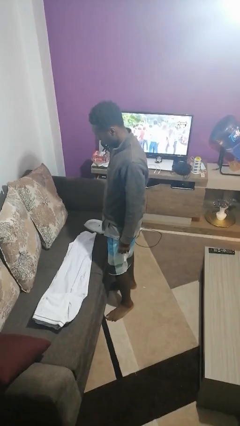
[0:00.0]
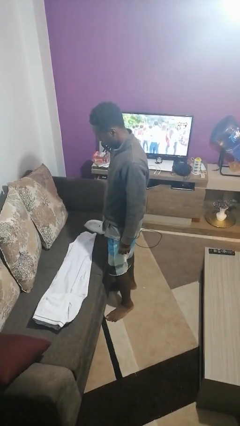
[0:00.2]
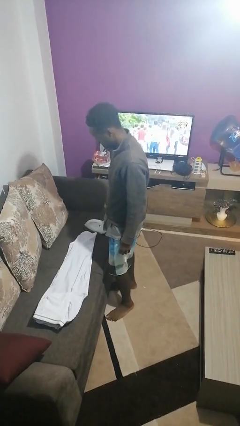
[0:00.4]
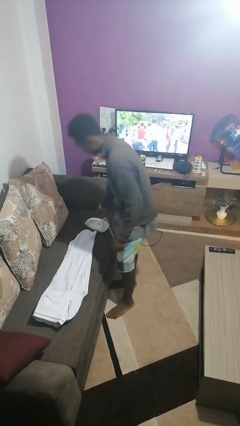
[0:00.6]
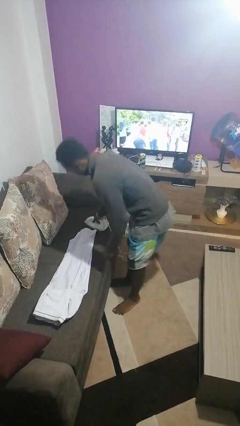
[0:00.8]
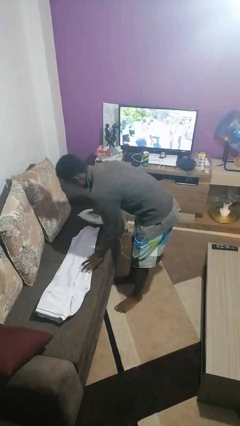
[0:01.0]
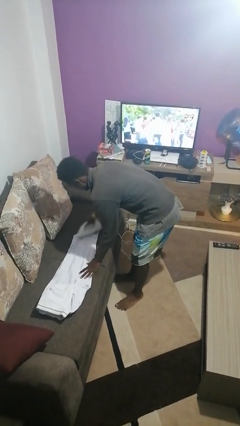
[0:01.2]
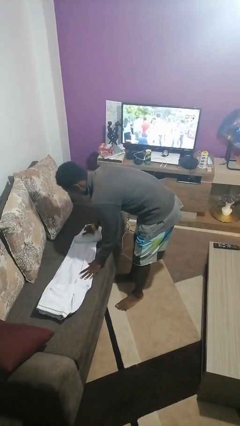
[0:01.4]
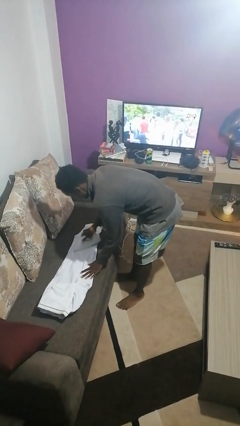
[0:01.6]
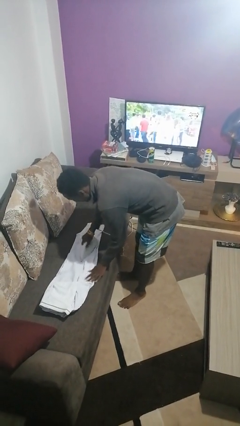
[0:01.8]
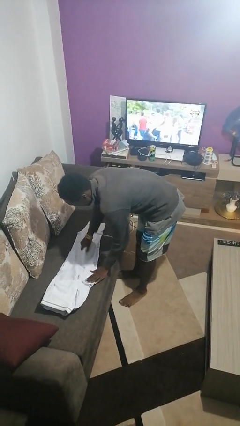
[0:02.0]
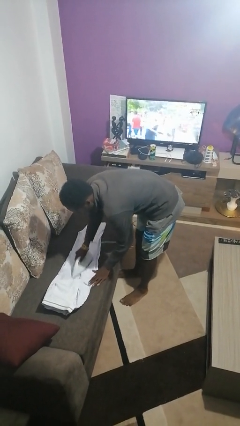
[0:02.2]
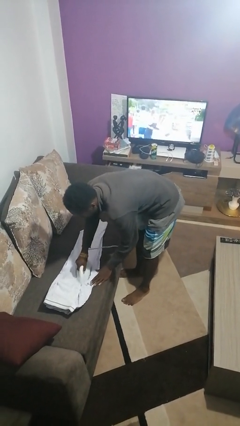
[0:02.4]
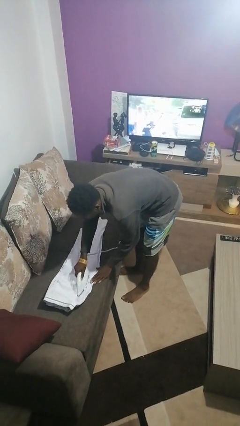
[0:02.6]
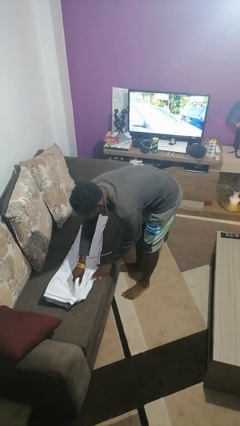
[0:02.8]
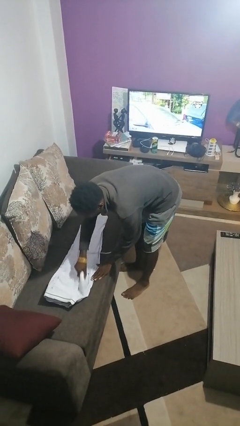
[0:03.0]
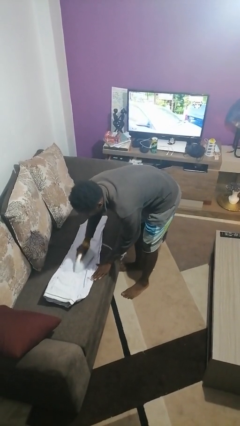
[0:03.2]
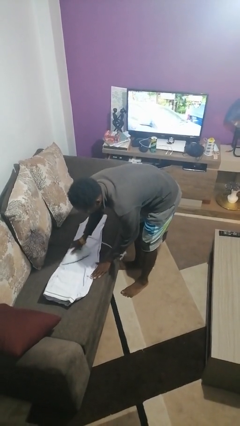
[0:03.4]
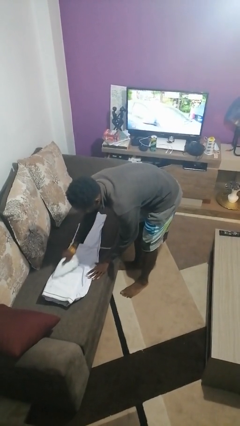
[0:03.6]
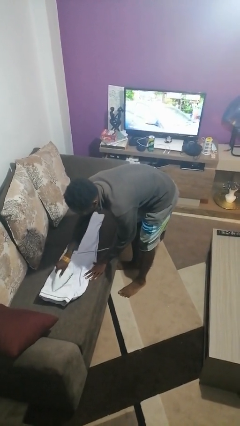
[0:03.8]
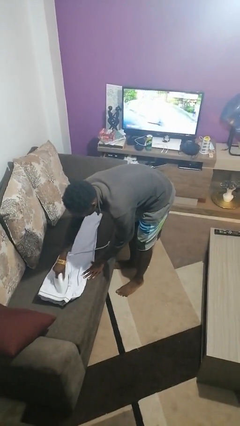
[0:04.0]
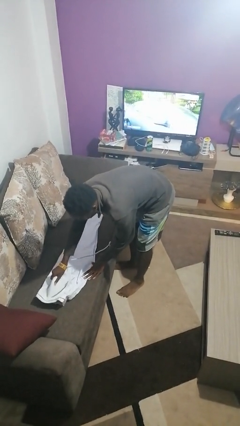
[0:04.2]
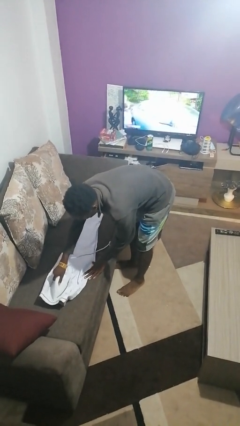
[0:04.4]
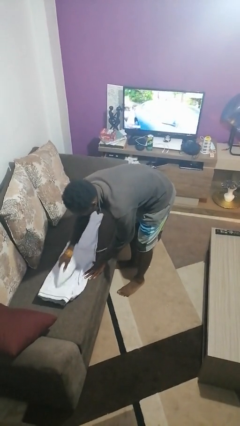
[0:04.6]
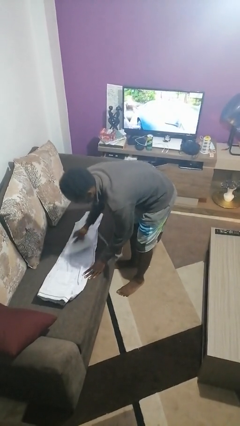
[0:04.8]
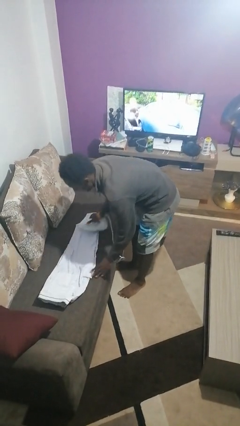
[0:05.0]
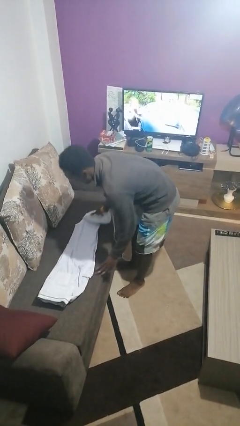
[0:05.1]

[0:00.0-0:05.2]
person irons clothes

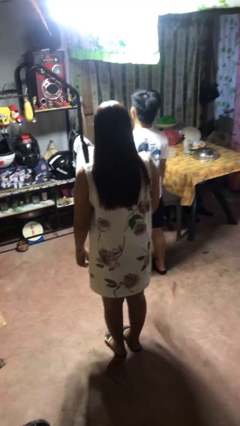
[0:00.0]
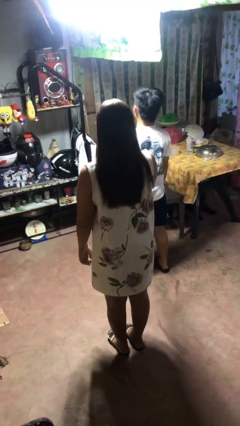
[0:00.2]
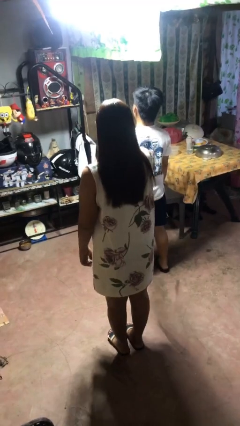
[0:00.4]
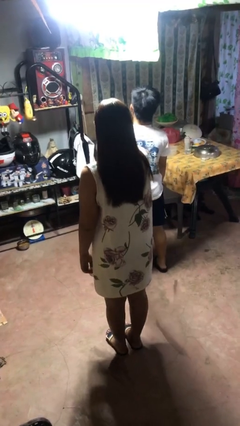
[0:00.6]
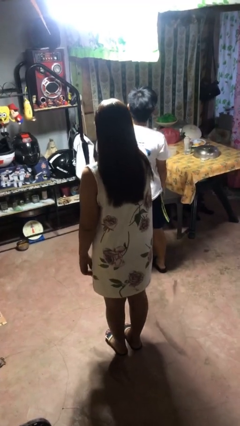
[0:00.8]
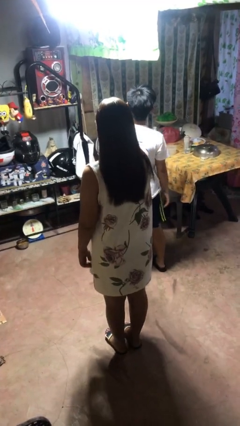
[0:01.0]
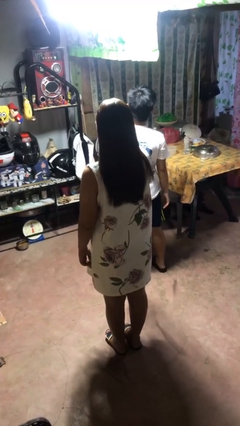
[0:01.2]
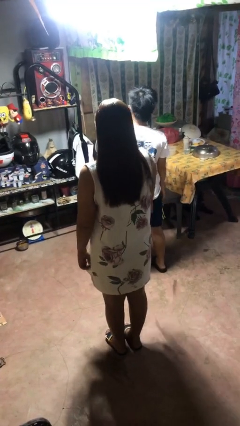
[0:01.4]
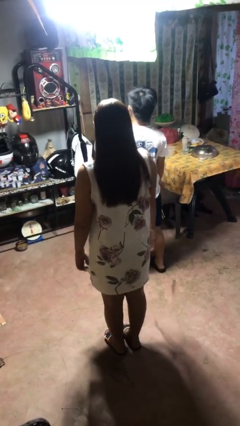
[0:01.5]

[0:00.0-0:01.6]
person shoves person

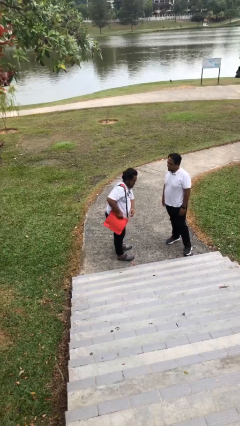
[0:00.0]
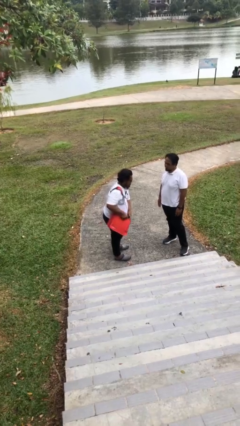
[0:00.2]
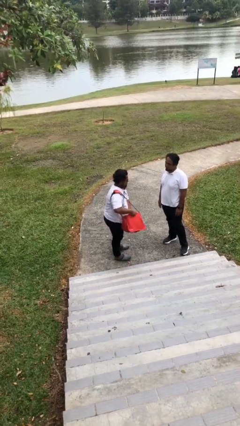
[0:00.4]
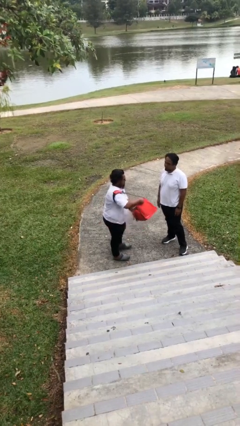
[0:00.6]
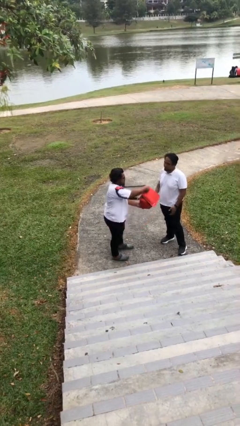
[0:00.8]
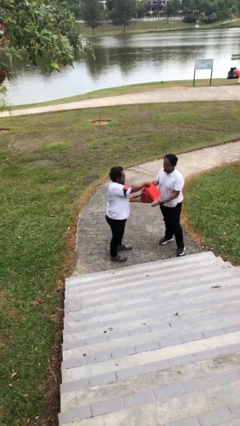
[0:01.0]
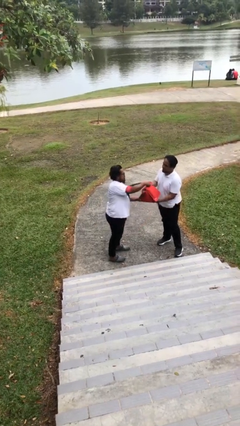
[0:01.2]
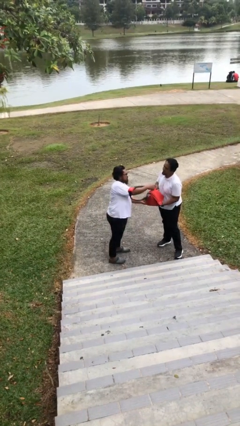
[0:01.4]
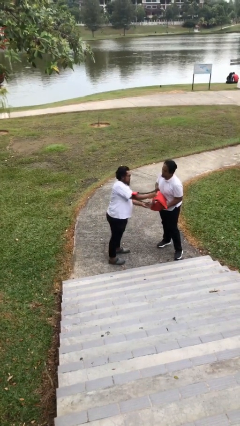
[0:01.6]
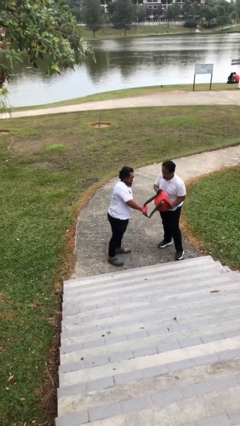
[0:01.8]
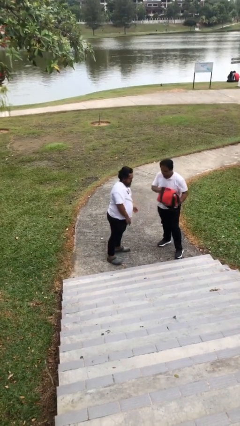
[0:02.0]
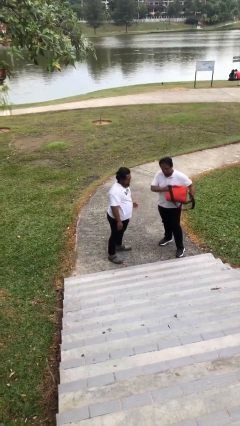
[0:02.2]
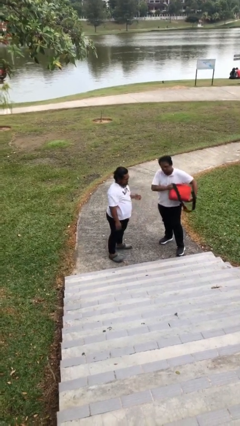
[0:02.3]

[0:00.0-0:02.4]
person transfers object to person

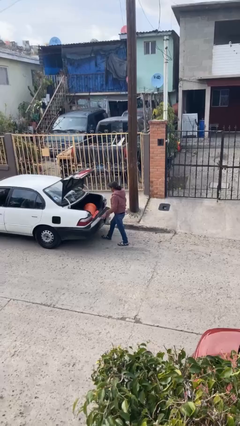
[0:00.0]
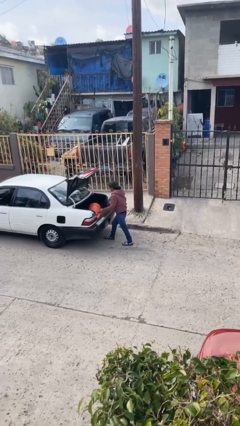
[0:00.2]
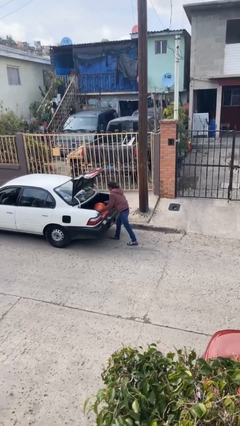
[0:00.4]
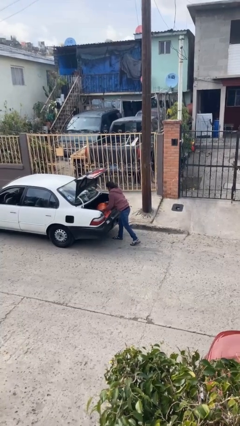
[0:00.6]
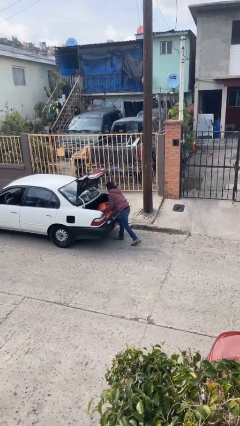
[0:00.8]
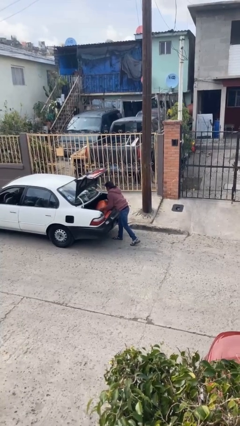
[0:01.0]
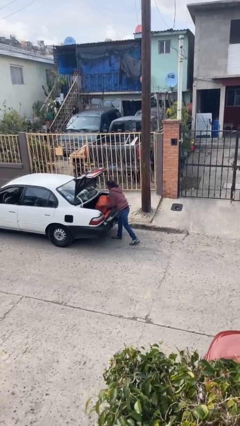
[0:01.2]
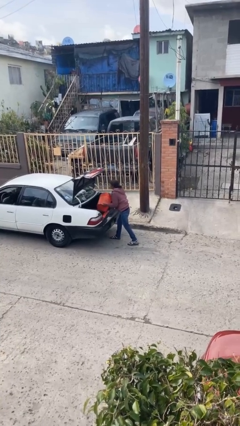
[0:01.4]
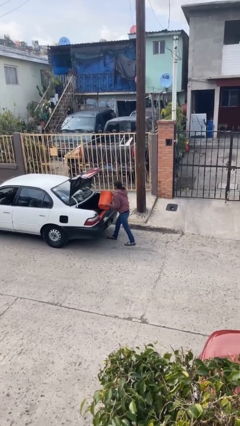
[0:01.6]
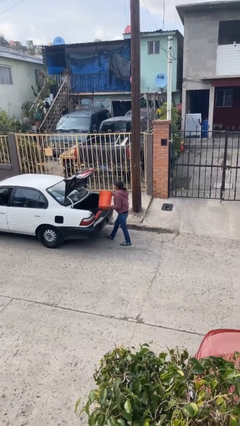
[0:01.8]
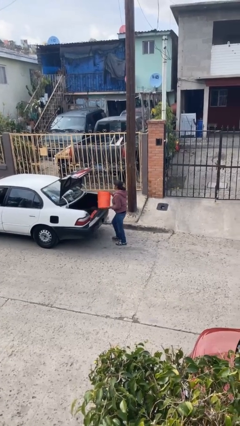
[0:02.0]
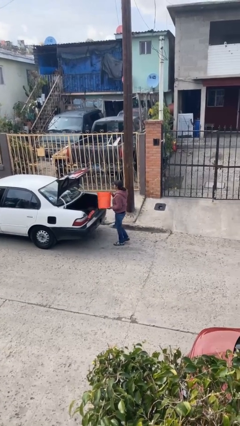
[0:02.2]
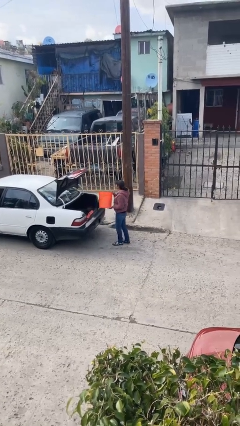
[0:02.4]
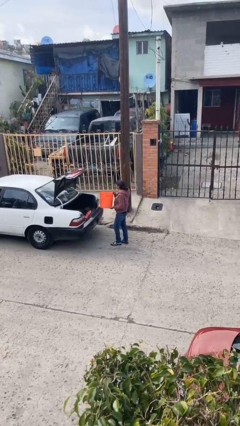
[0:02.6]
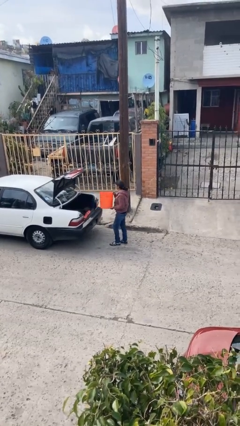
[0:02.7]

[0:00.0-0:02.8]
person unloads car

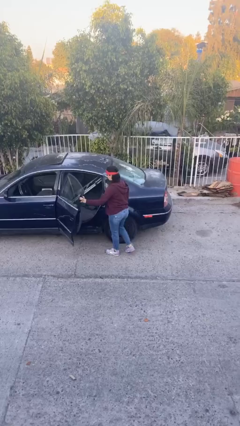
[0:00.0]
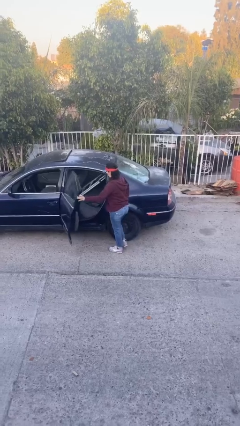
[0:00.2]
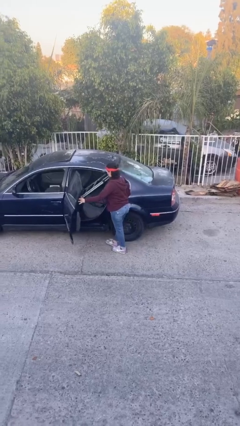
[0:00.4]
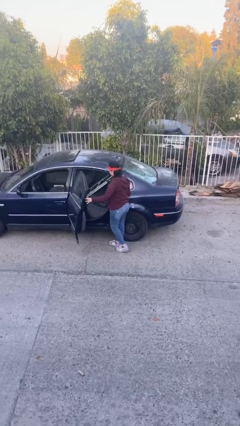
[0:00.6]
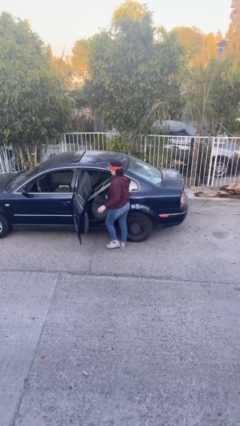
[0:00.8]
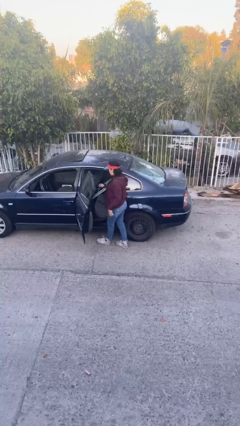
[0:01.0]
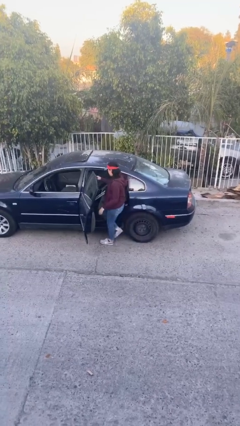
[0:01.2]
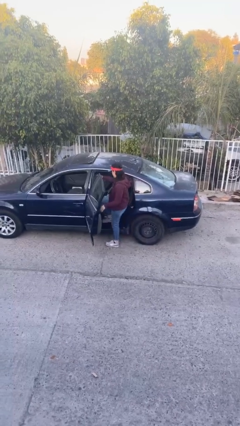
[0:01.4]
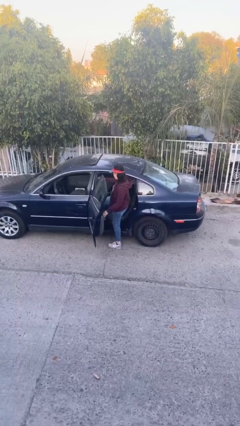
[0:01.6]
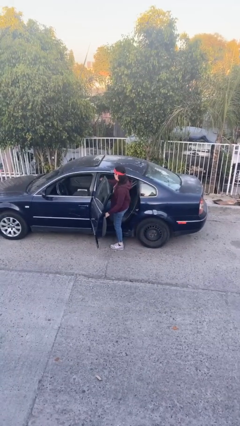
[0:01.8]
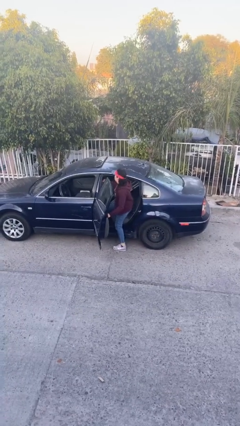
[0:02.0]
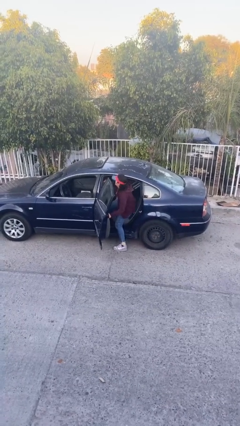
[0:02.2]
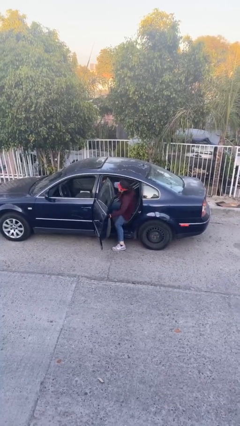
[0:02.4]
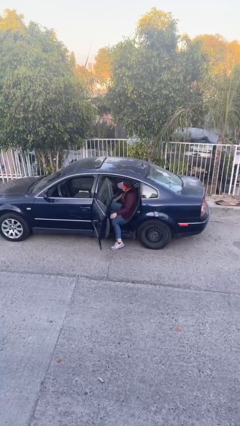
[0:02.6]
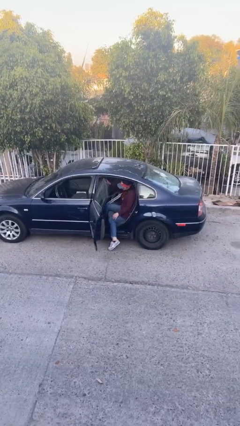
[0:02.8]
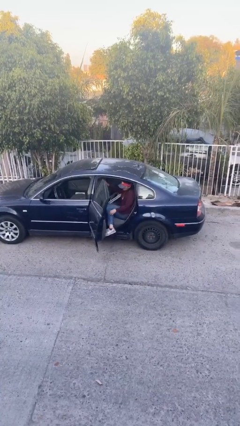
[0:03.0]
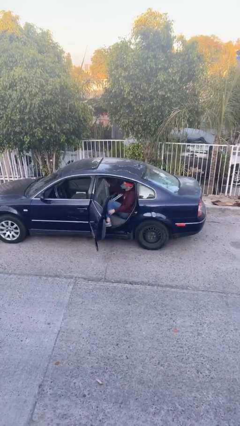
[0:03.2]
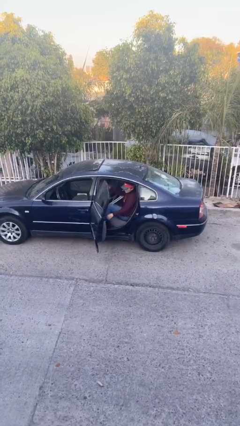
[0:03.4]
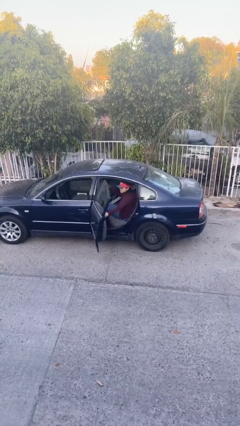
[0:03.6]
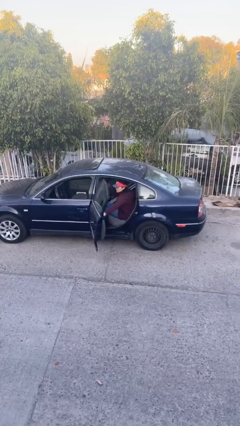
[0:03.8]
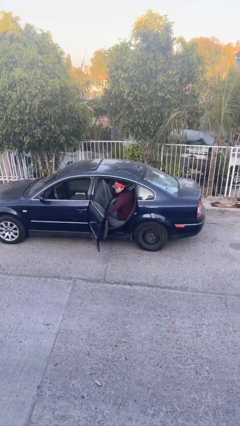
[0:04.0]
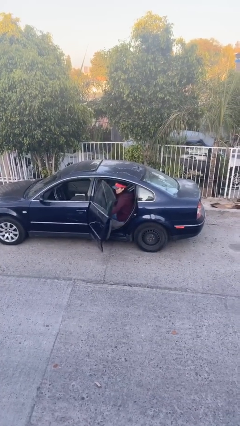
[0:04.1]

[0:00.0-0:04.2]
person enters car

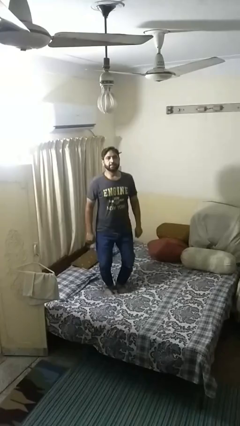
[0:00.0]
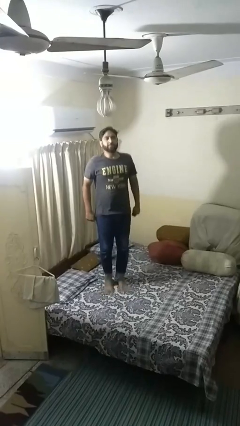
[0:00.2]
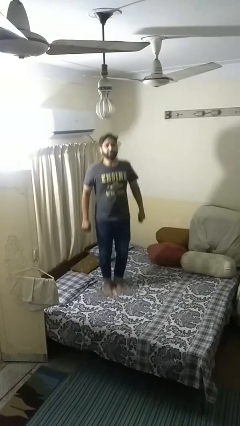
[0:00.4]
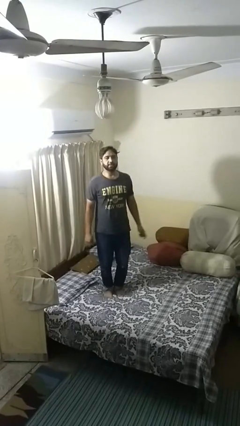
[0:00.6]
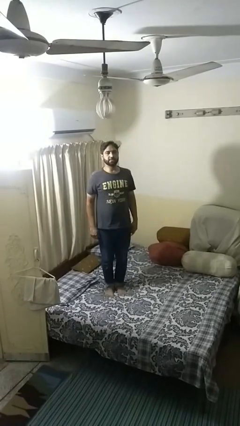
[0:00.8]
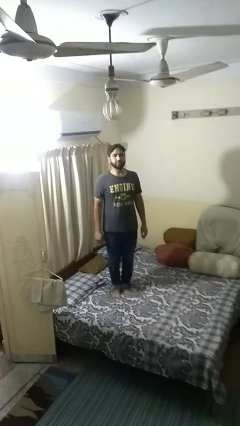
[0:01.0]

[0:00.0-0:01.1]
person jumps on bed
